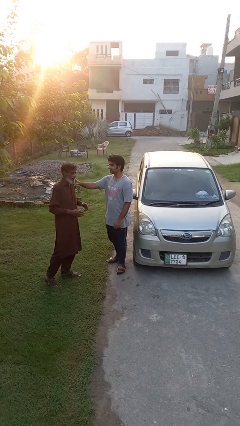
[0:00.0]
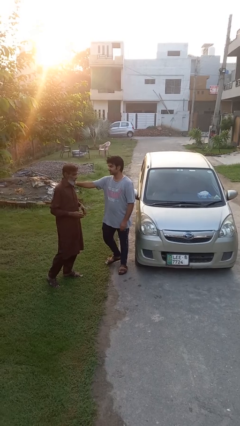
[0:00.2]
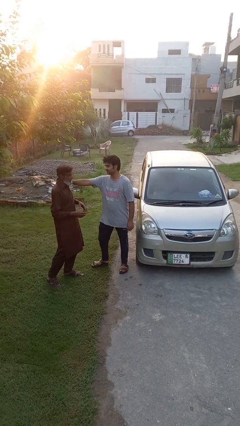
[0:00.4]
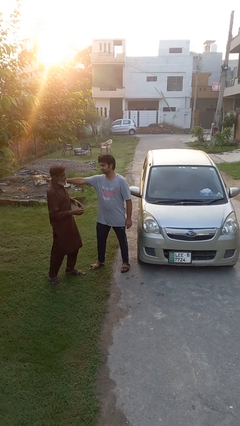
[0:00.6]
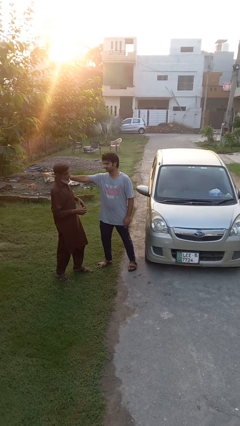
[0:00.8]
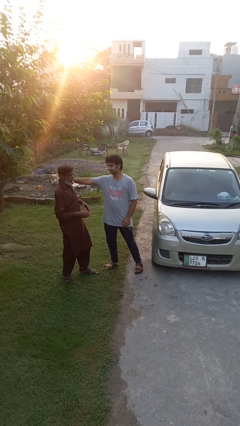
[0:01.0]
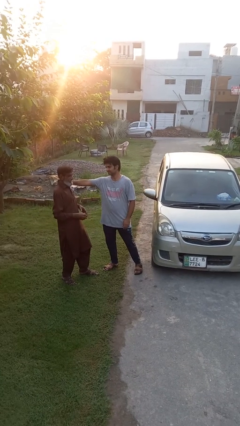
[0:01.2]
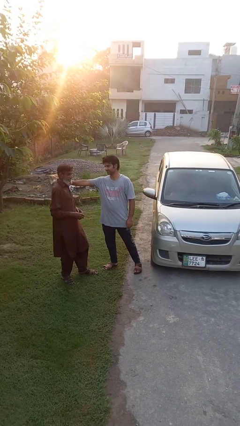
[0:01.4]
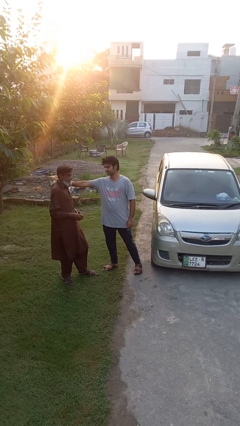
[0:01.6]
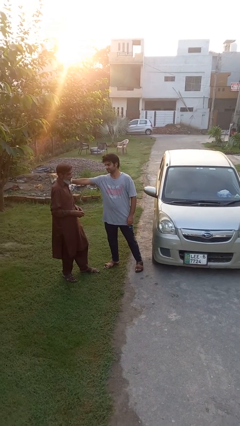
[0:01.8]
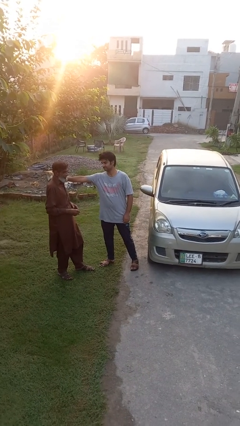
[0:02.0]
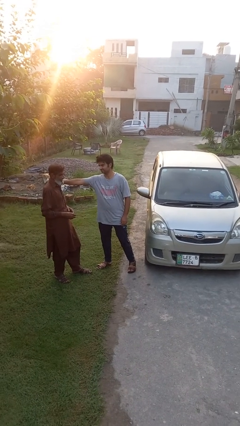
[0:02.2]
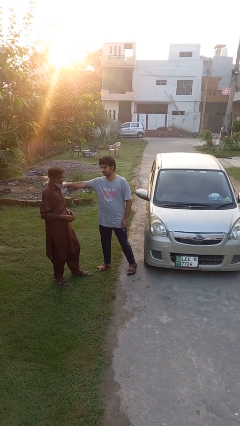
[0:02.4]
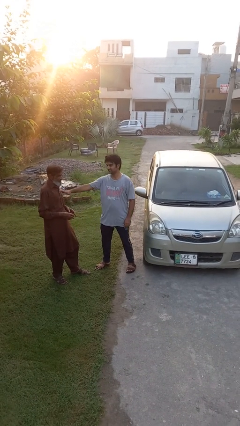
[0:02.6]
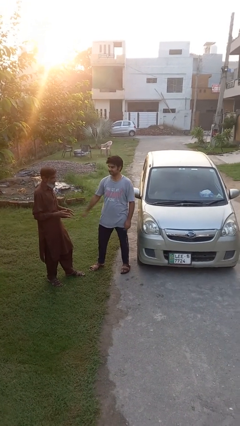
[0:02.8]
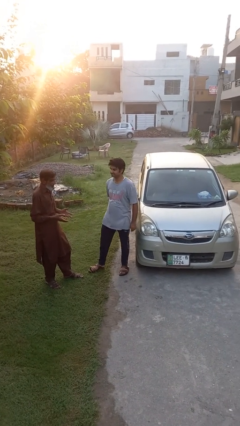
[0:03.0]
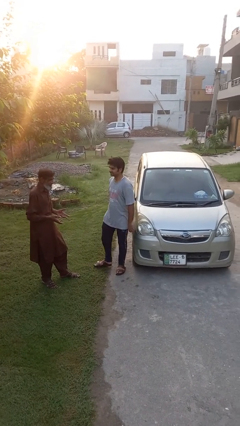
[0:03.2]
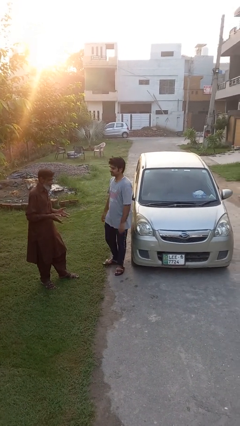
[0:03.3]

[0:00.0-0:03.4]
person shoves person

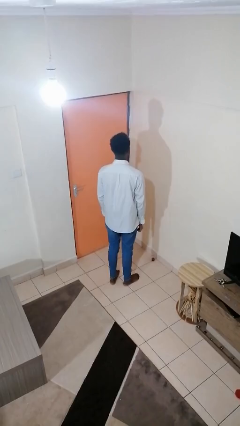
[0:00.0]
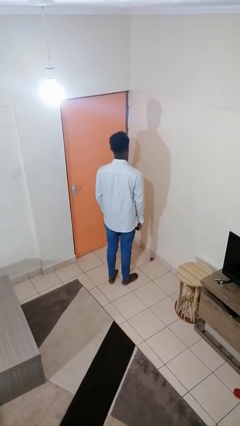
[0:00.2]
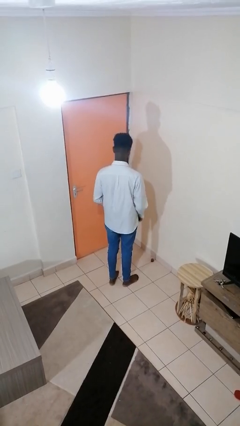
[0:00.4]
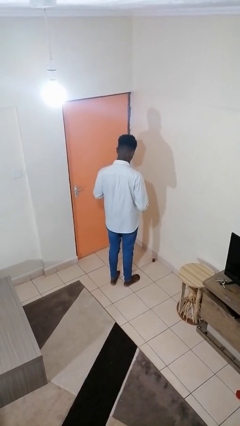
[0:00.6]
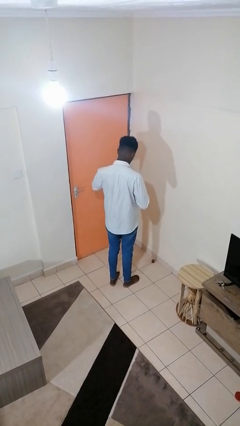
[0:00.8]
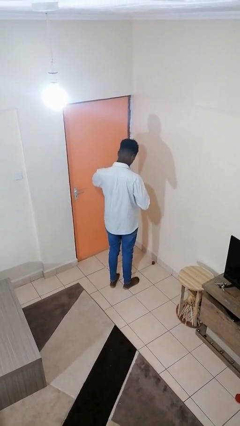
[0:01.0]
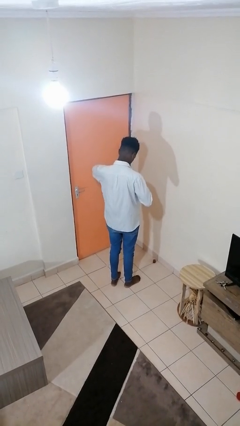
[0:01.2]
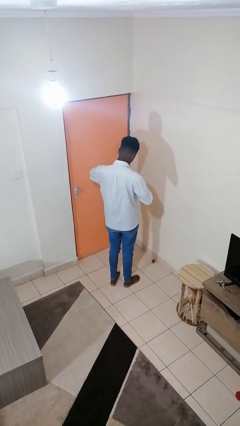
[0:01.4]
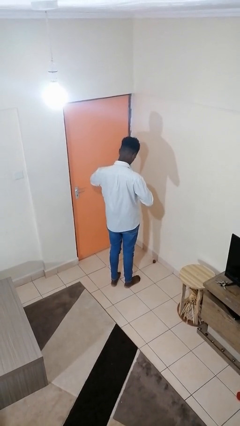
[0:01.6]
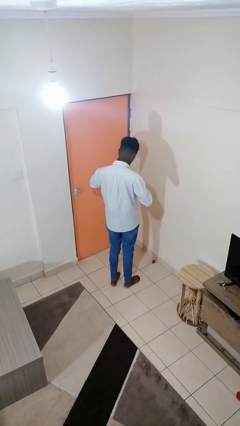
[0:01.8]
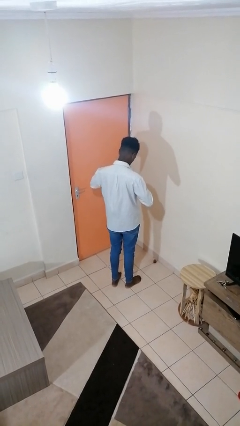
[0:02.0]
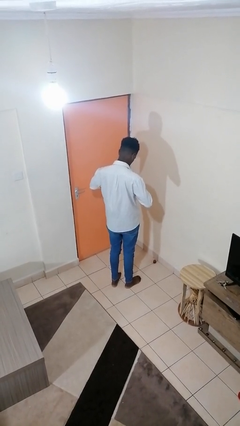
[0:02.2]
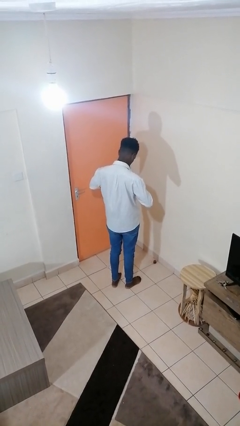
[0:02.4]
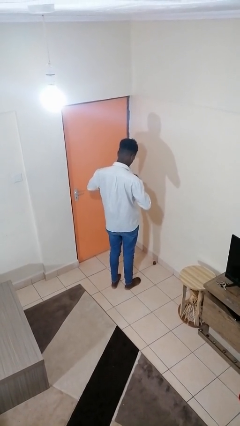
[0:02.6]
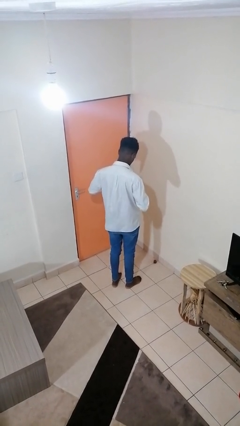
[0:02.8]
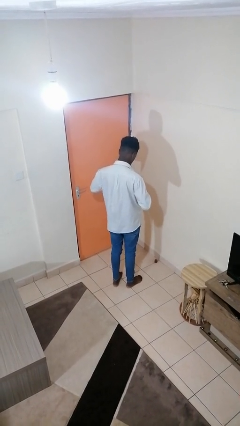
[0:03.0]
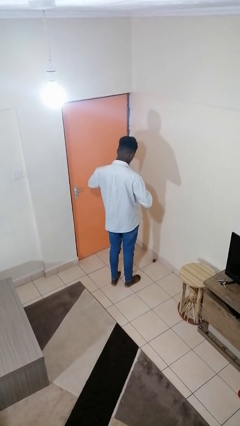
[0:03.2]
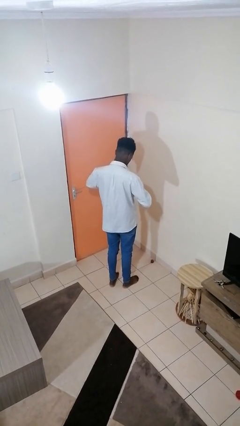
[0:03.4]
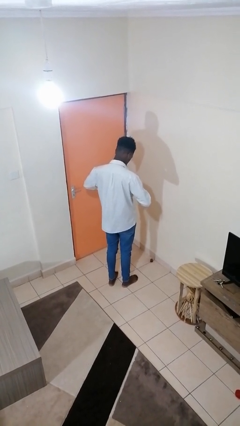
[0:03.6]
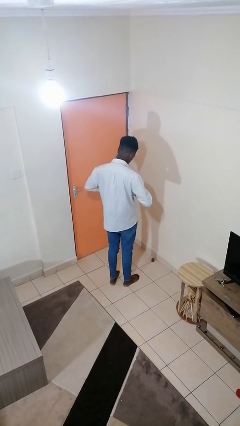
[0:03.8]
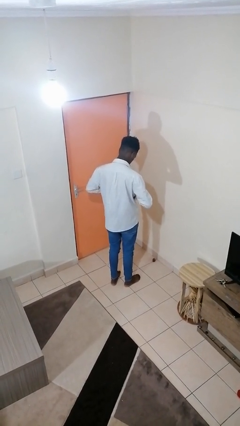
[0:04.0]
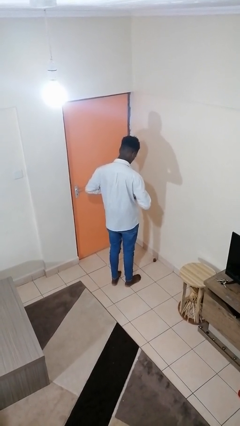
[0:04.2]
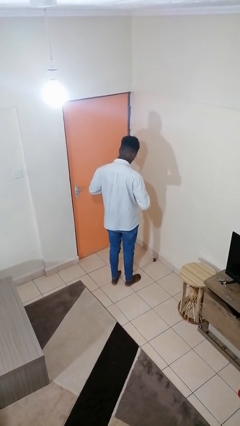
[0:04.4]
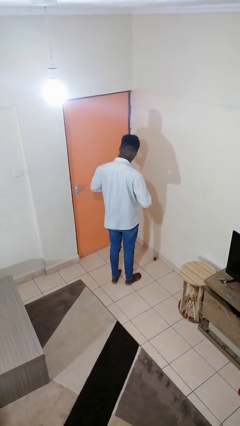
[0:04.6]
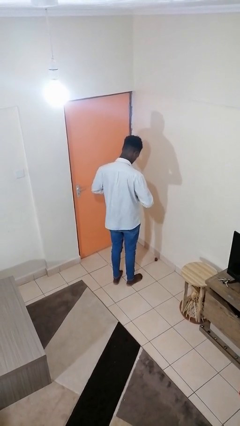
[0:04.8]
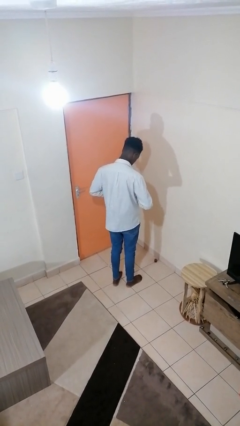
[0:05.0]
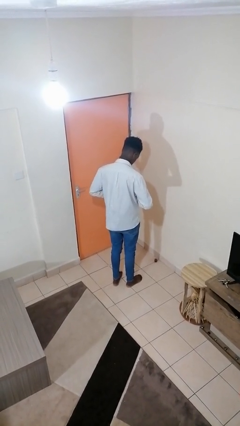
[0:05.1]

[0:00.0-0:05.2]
person unbuttons shirt

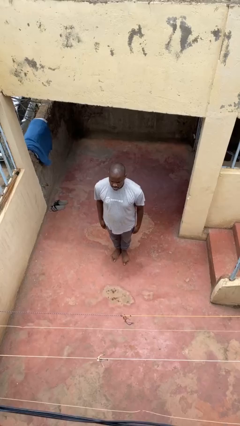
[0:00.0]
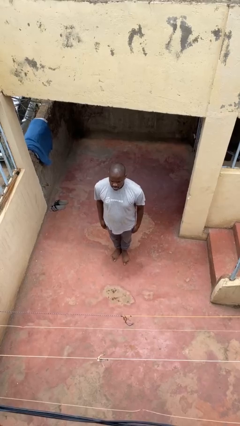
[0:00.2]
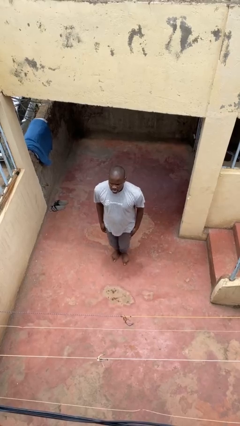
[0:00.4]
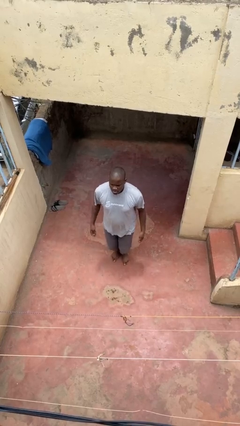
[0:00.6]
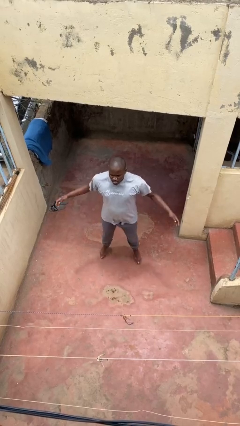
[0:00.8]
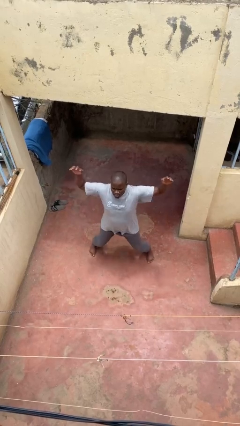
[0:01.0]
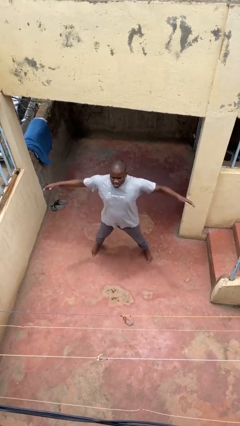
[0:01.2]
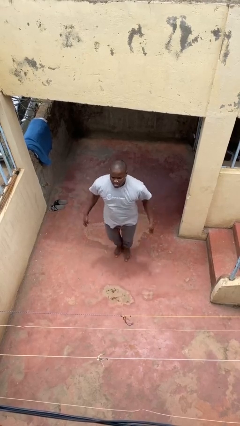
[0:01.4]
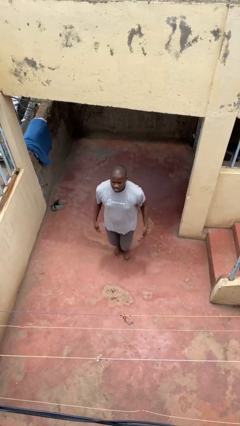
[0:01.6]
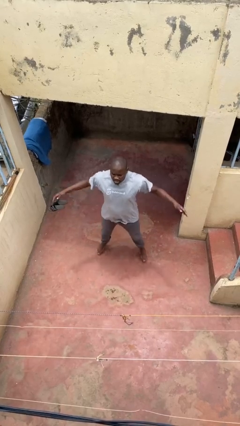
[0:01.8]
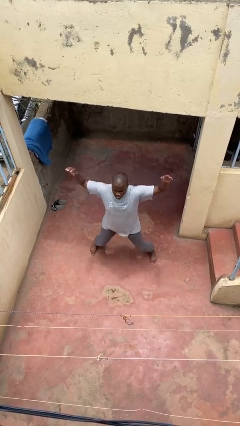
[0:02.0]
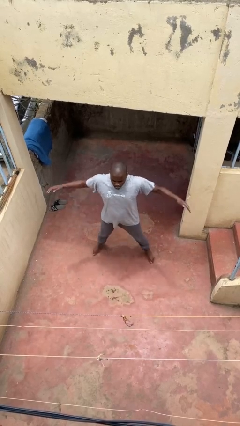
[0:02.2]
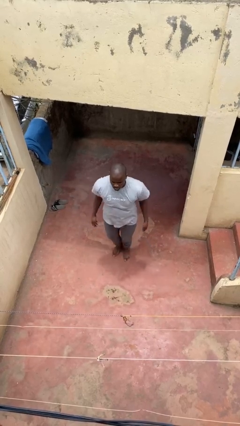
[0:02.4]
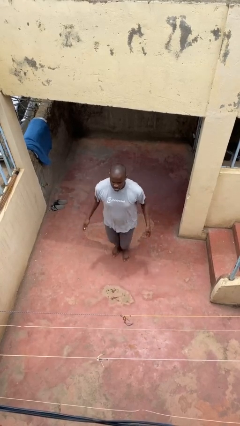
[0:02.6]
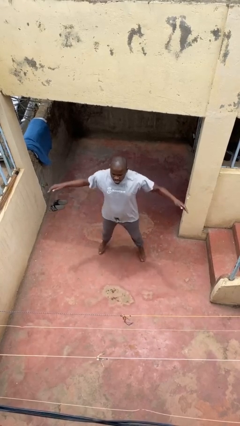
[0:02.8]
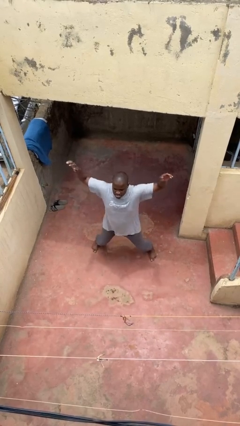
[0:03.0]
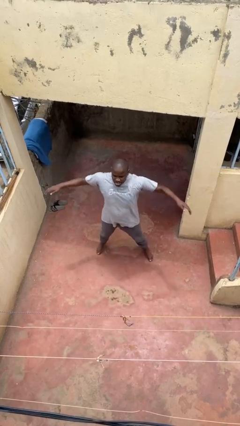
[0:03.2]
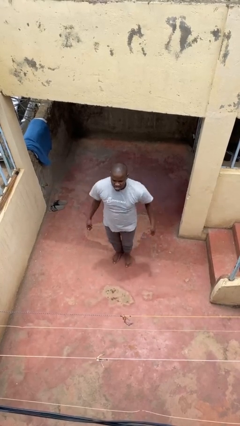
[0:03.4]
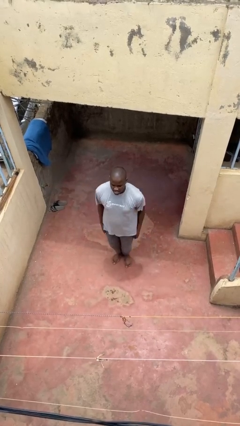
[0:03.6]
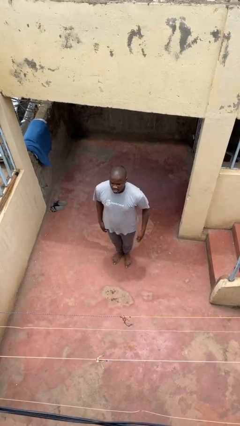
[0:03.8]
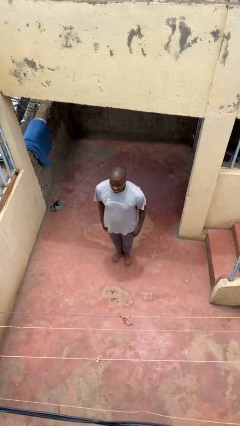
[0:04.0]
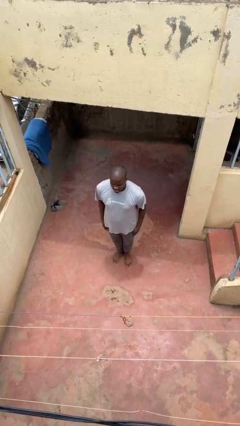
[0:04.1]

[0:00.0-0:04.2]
person exercises with jumping jacks

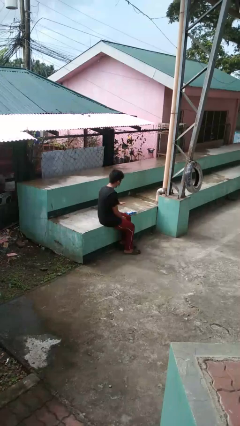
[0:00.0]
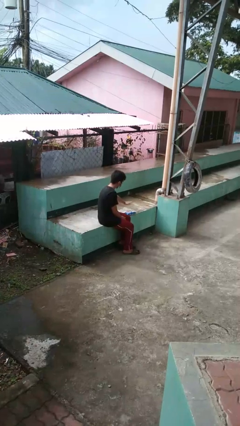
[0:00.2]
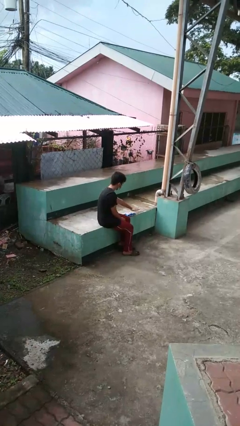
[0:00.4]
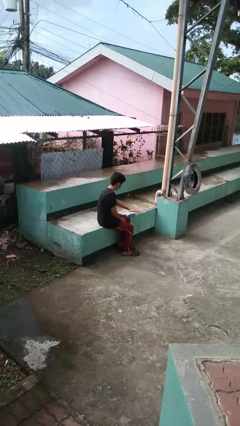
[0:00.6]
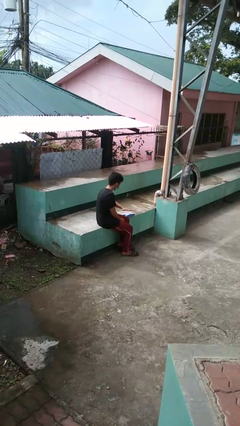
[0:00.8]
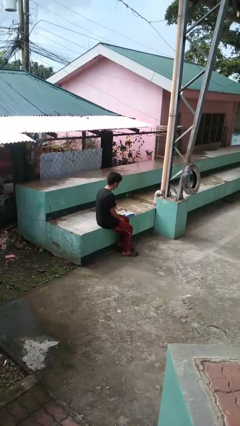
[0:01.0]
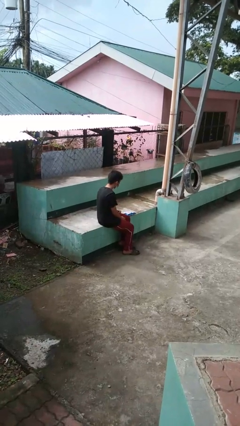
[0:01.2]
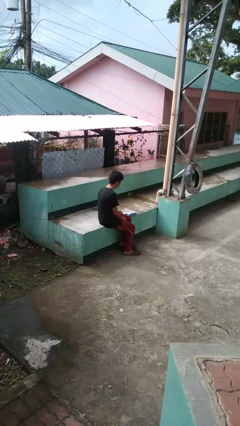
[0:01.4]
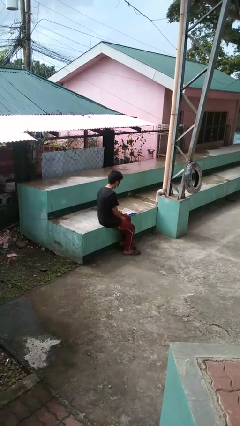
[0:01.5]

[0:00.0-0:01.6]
person waves hand over object

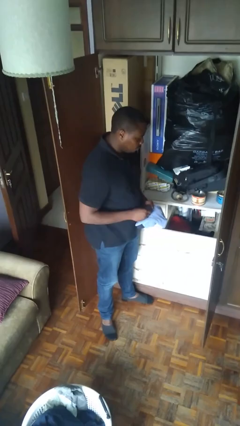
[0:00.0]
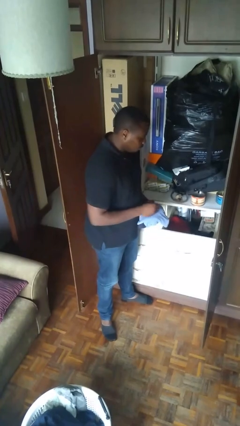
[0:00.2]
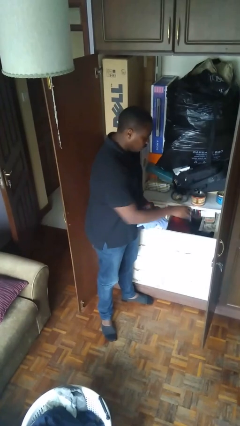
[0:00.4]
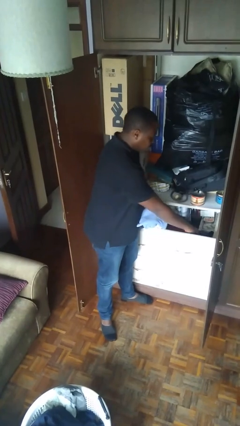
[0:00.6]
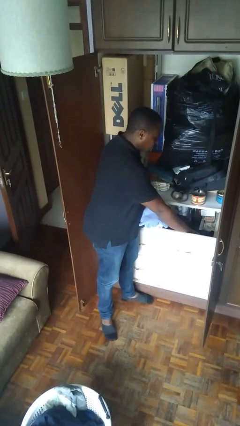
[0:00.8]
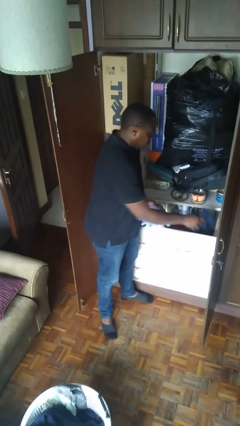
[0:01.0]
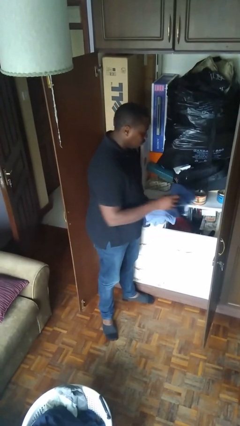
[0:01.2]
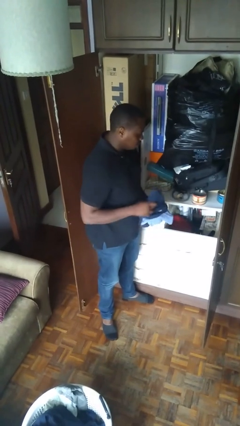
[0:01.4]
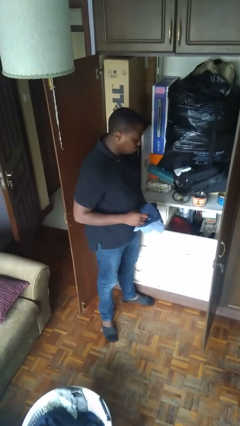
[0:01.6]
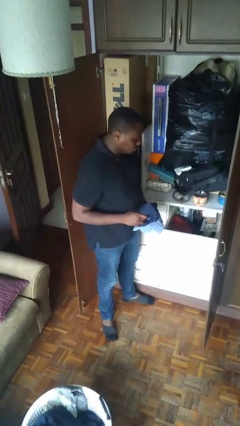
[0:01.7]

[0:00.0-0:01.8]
person takes clothes from dresser

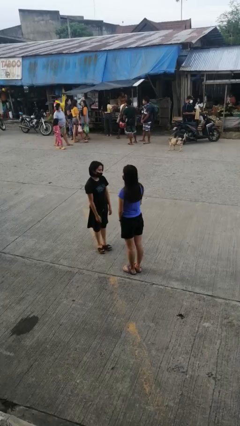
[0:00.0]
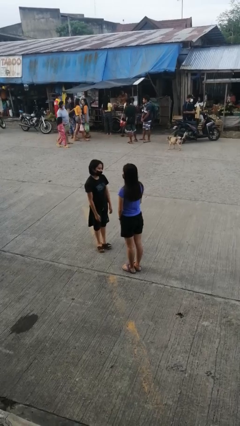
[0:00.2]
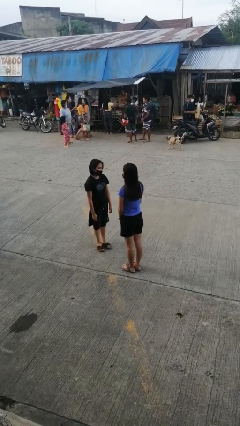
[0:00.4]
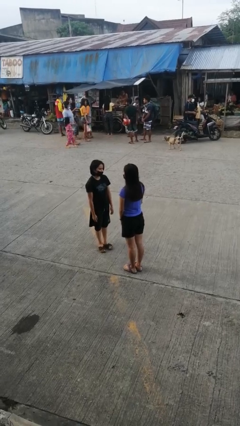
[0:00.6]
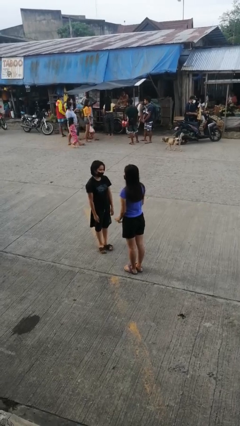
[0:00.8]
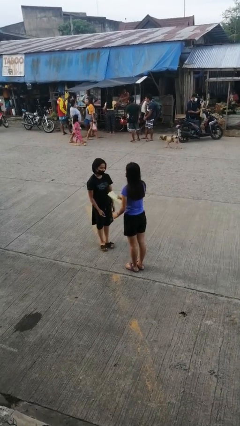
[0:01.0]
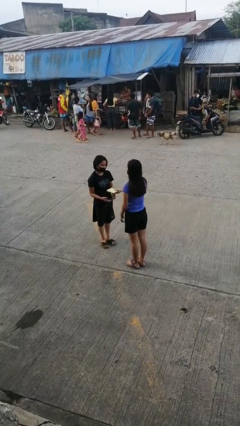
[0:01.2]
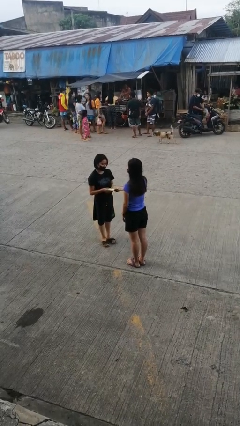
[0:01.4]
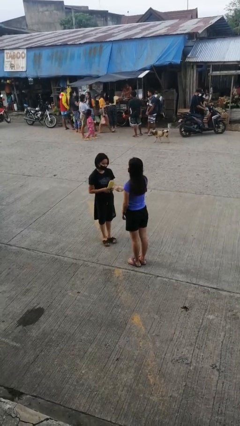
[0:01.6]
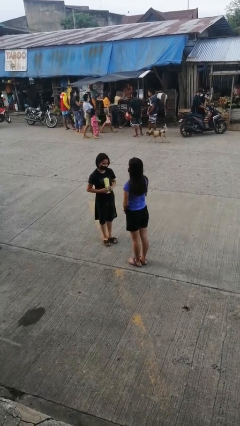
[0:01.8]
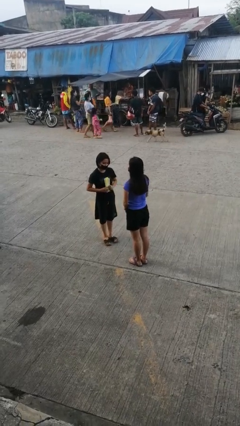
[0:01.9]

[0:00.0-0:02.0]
person transfers object to person
